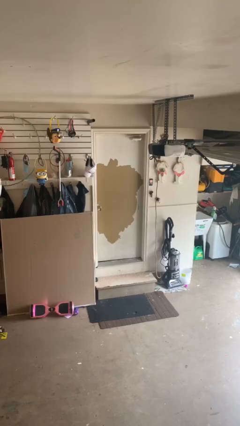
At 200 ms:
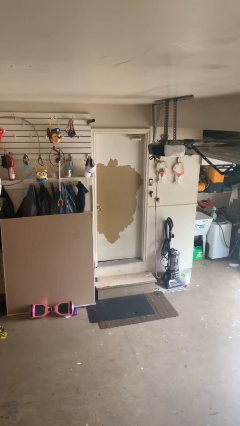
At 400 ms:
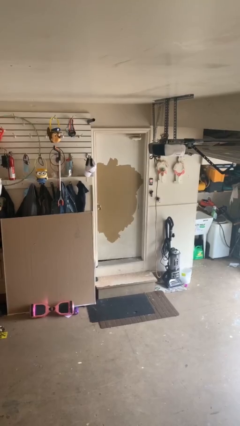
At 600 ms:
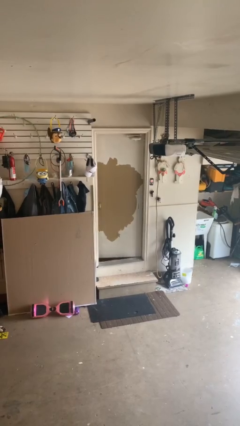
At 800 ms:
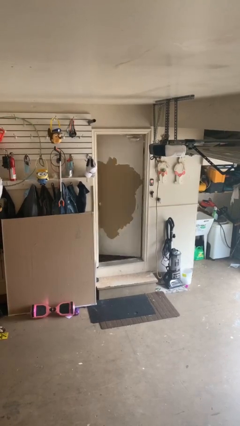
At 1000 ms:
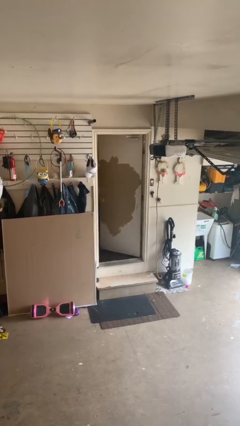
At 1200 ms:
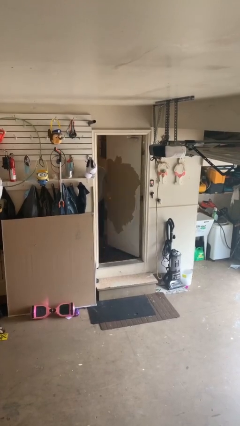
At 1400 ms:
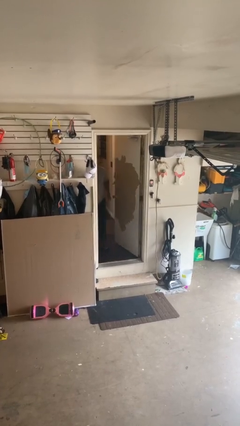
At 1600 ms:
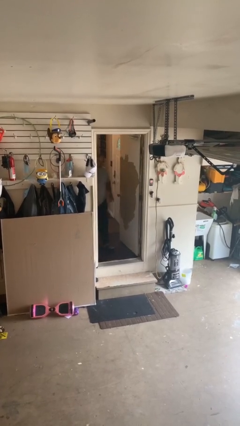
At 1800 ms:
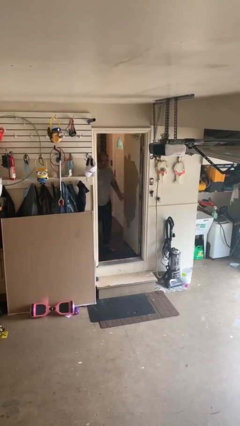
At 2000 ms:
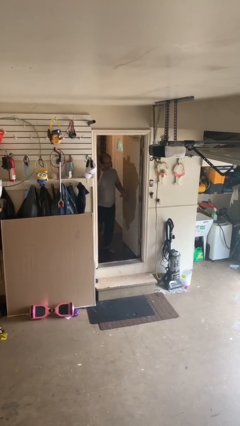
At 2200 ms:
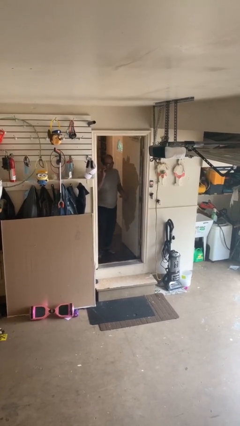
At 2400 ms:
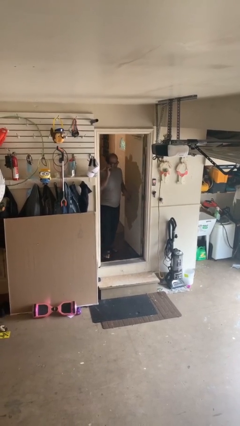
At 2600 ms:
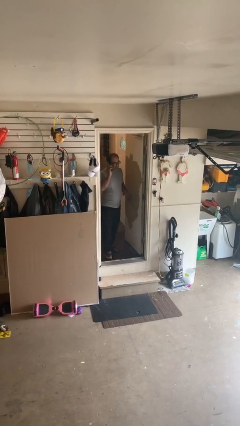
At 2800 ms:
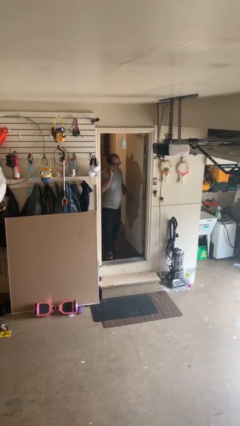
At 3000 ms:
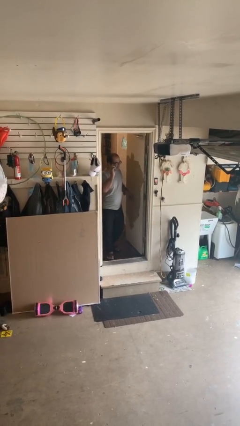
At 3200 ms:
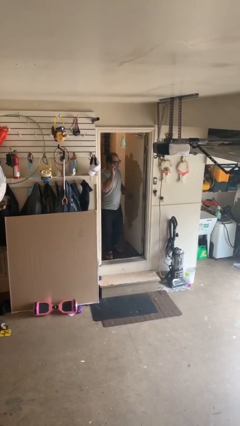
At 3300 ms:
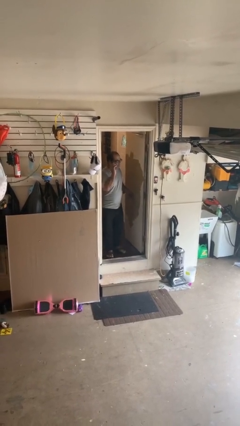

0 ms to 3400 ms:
person opens facility door

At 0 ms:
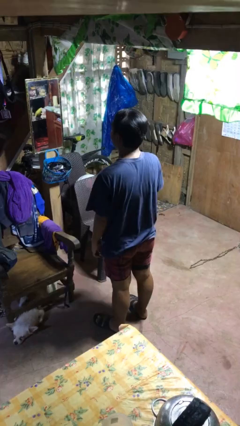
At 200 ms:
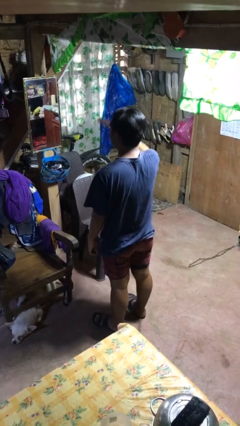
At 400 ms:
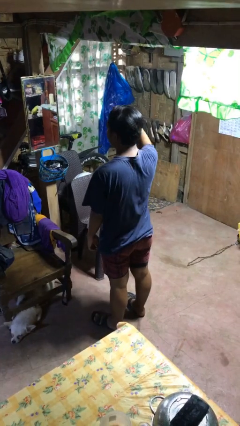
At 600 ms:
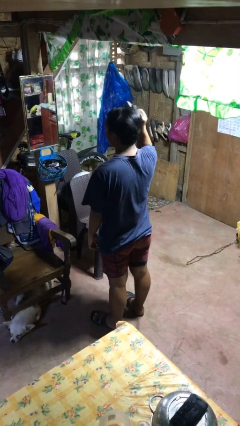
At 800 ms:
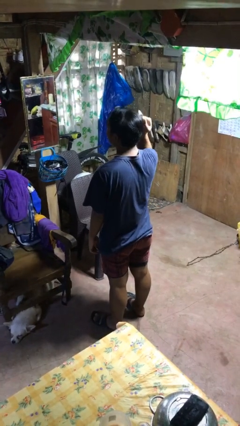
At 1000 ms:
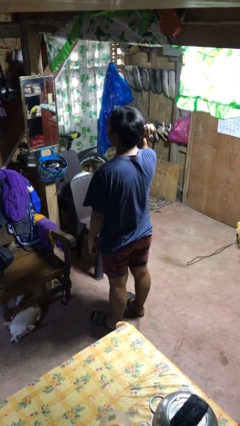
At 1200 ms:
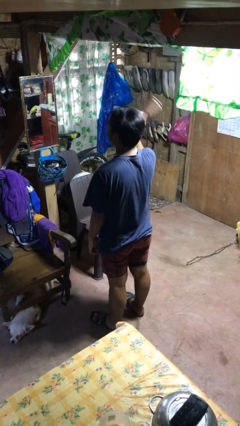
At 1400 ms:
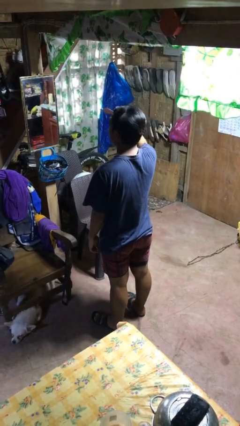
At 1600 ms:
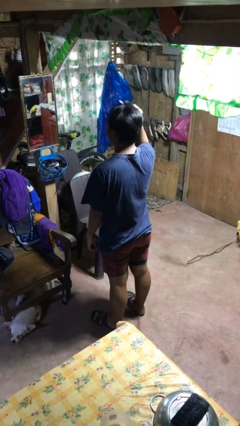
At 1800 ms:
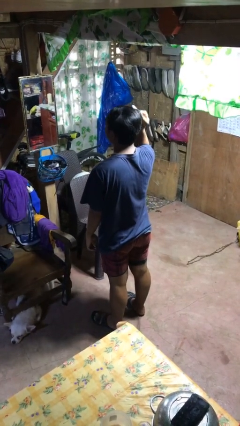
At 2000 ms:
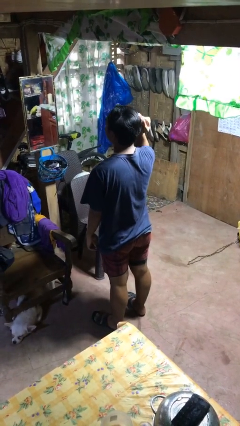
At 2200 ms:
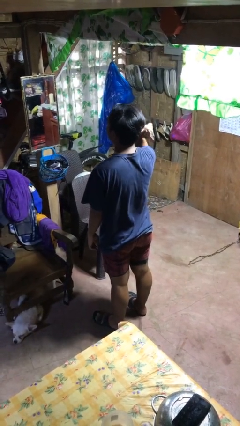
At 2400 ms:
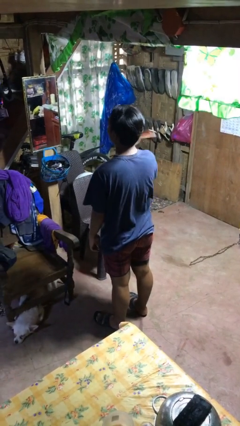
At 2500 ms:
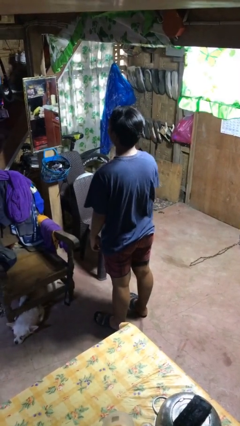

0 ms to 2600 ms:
person brushes hair

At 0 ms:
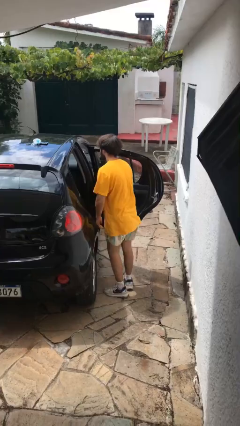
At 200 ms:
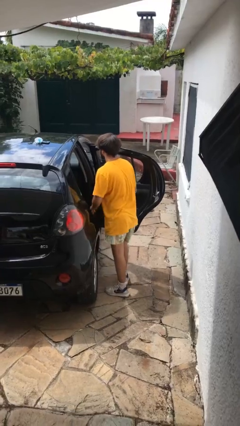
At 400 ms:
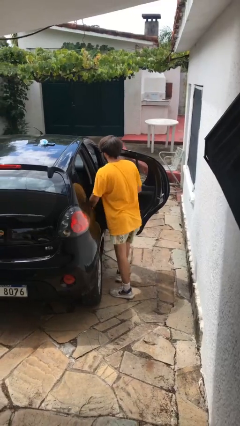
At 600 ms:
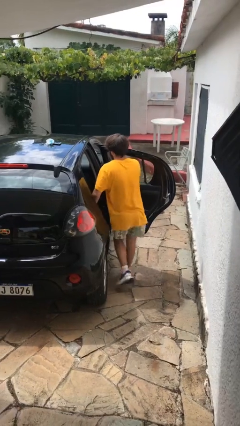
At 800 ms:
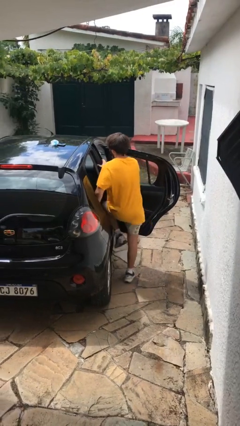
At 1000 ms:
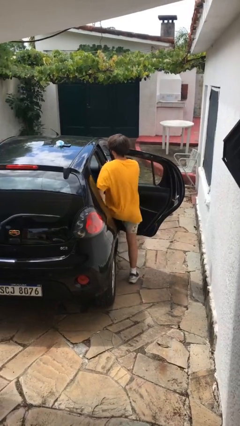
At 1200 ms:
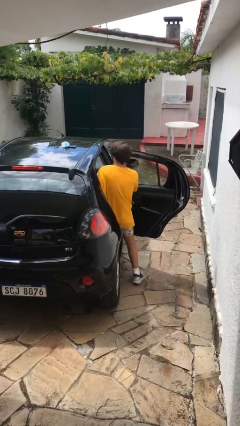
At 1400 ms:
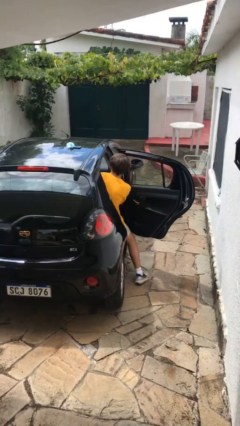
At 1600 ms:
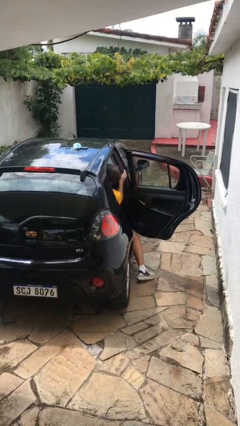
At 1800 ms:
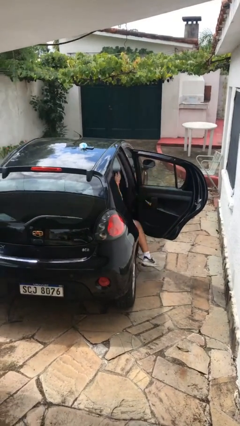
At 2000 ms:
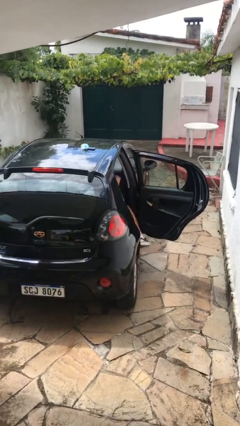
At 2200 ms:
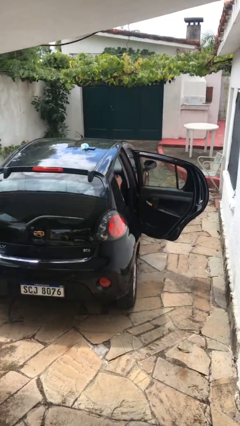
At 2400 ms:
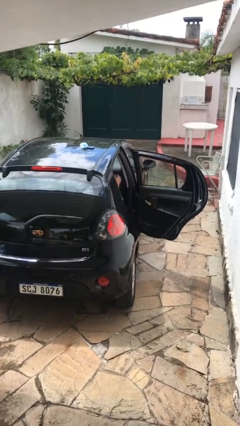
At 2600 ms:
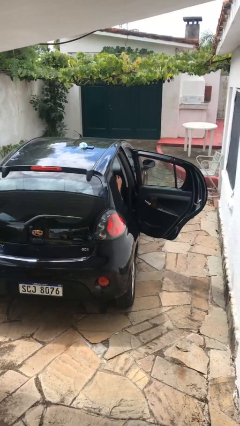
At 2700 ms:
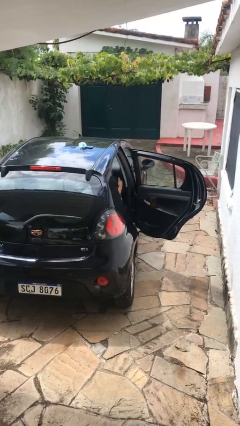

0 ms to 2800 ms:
person enters car

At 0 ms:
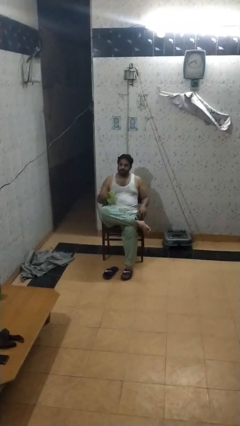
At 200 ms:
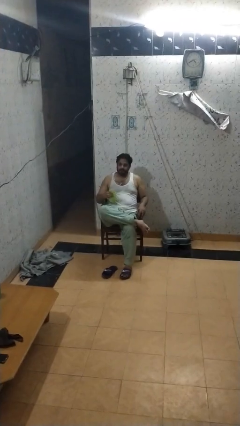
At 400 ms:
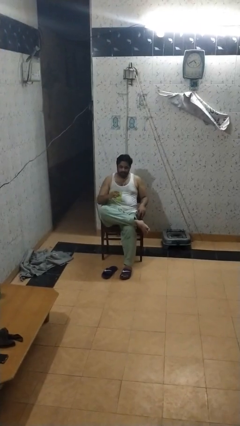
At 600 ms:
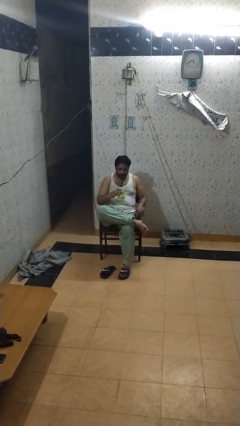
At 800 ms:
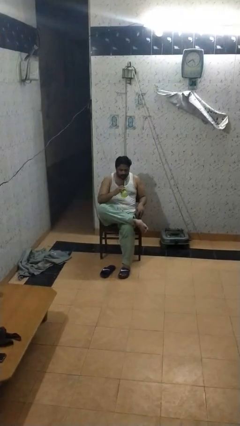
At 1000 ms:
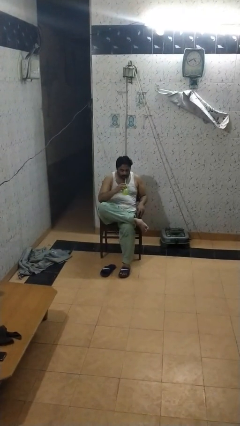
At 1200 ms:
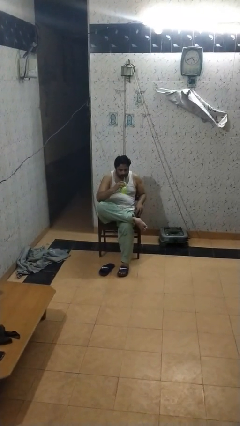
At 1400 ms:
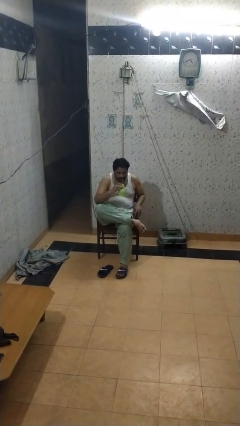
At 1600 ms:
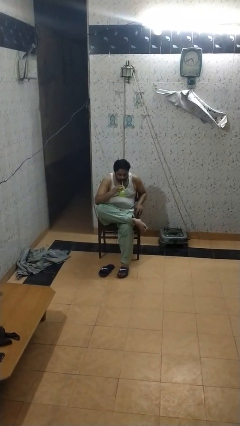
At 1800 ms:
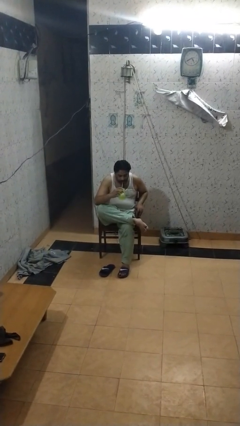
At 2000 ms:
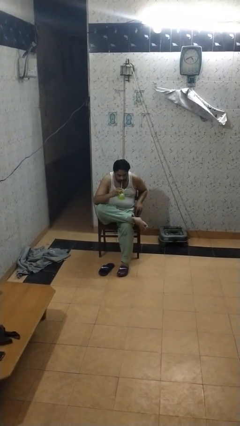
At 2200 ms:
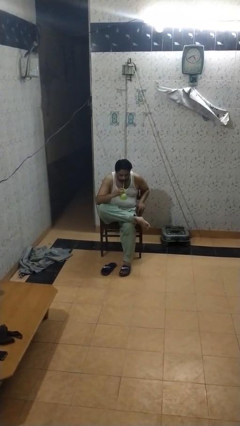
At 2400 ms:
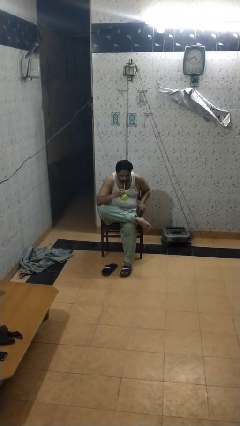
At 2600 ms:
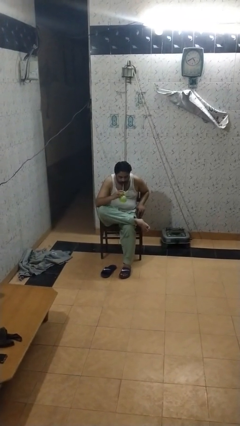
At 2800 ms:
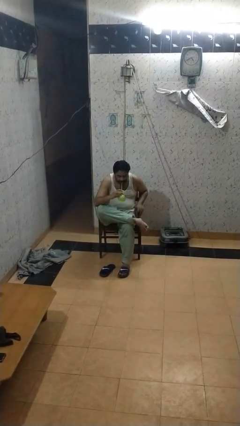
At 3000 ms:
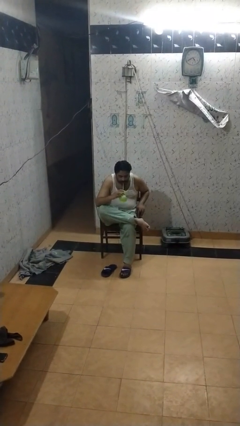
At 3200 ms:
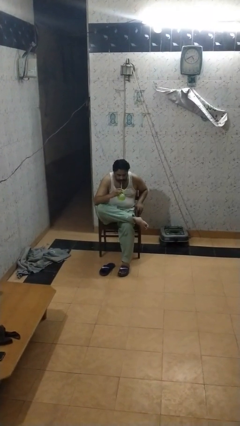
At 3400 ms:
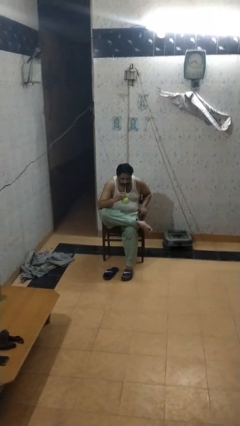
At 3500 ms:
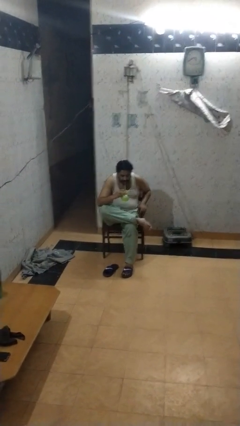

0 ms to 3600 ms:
person drinks from straw

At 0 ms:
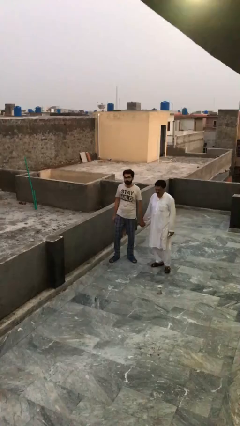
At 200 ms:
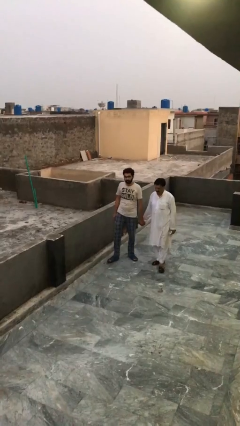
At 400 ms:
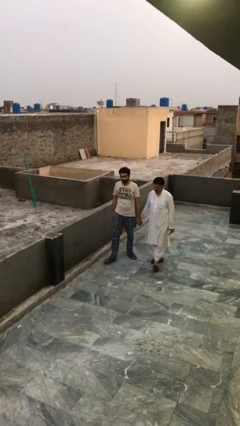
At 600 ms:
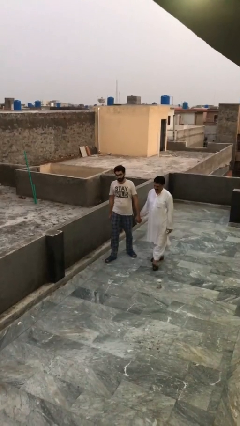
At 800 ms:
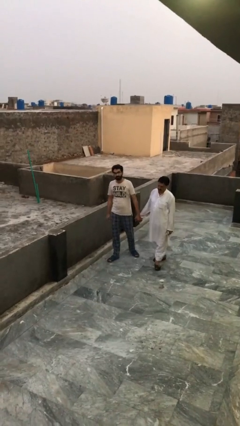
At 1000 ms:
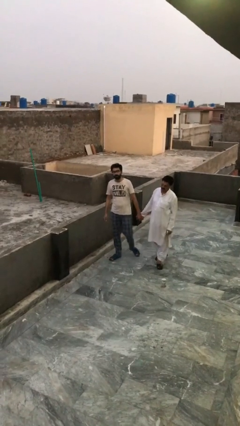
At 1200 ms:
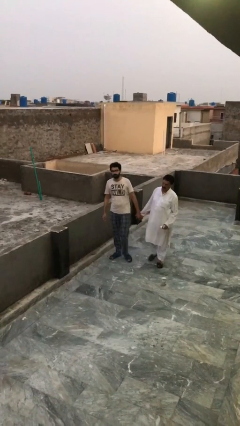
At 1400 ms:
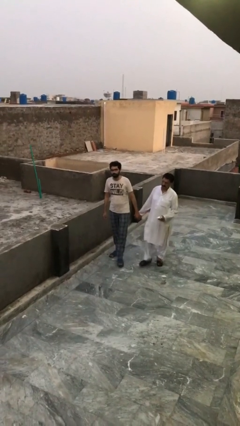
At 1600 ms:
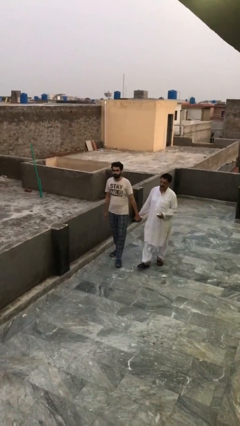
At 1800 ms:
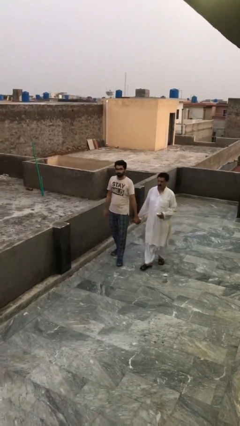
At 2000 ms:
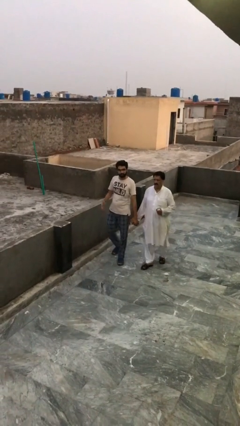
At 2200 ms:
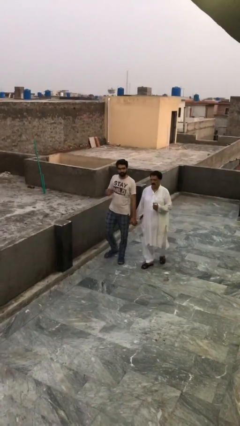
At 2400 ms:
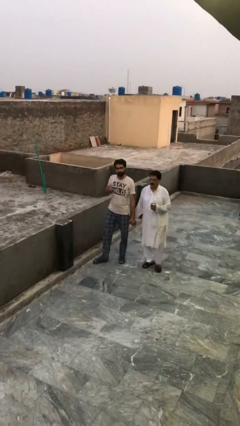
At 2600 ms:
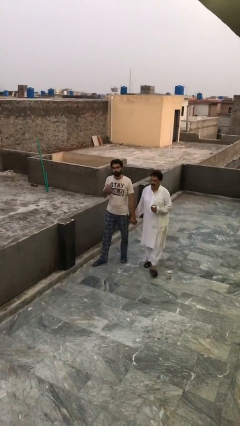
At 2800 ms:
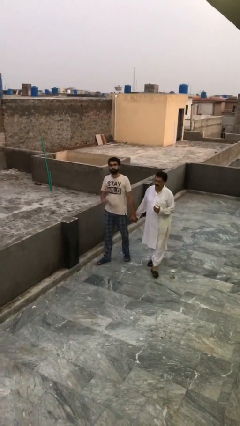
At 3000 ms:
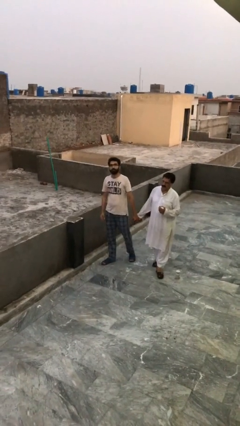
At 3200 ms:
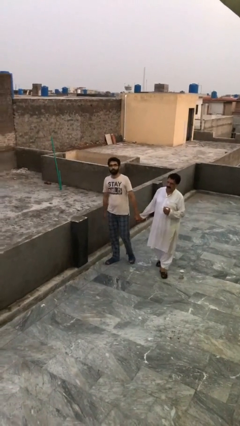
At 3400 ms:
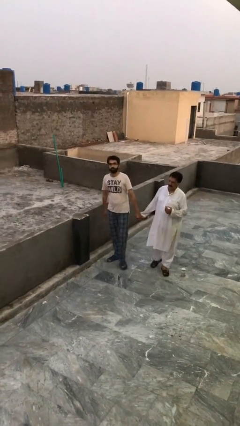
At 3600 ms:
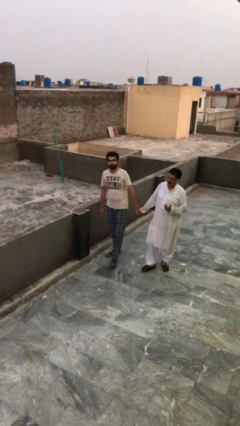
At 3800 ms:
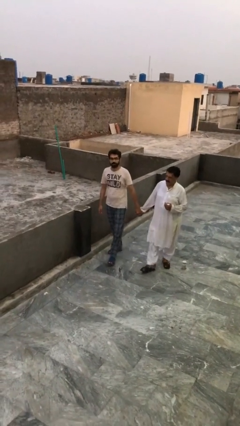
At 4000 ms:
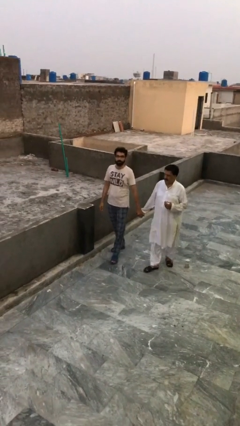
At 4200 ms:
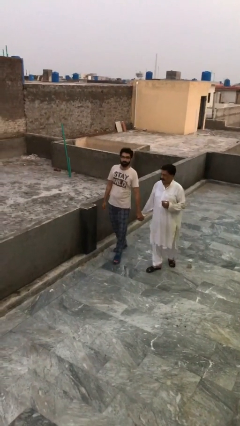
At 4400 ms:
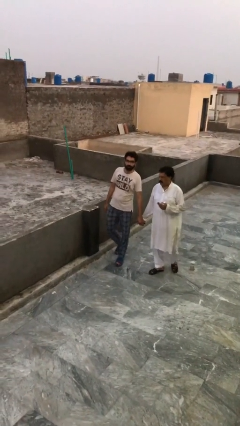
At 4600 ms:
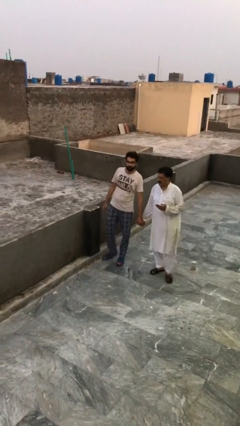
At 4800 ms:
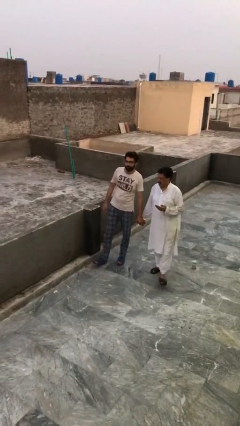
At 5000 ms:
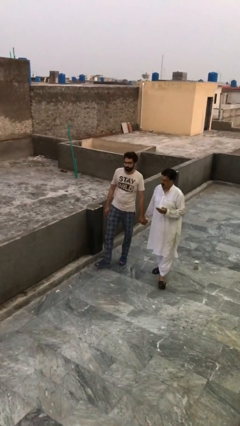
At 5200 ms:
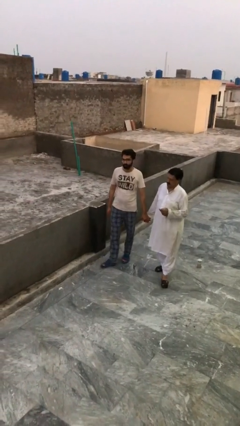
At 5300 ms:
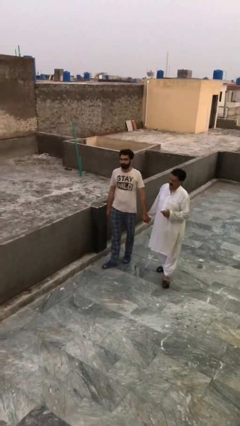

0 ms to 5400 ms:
person holds hand
